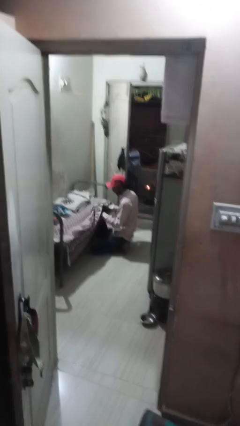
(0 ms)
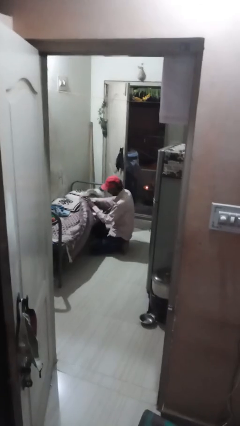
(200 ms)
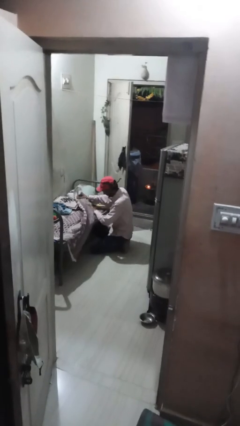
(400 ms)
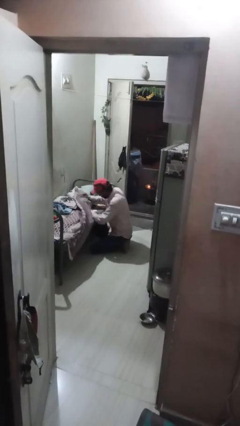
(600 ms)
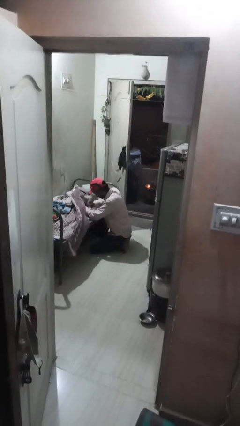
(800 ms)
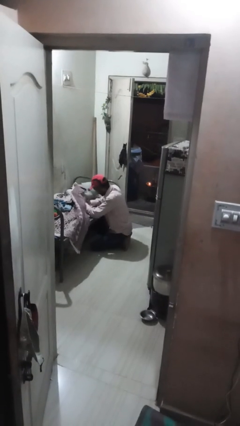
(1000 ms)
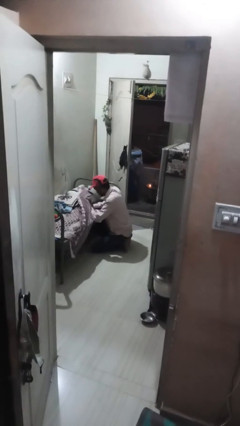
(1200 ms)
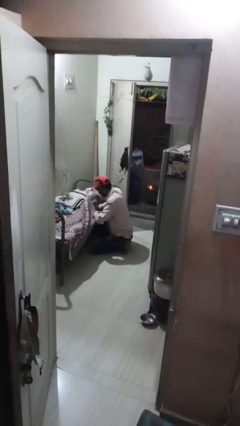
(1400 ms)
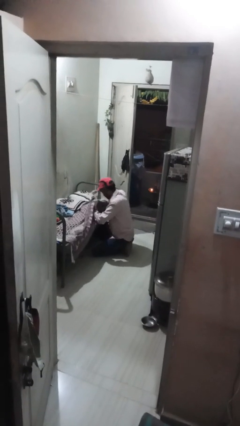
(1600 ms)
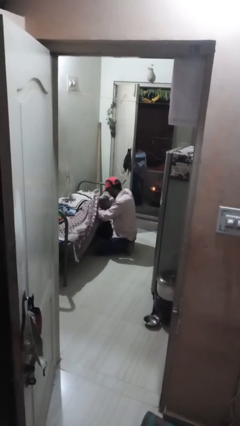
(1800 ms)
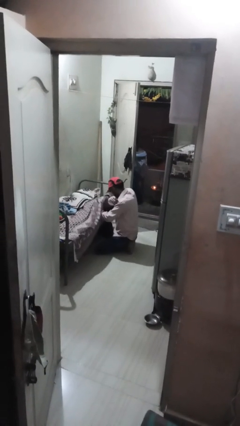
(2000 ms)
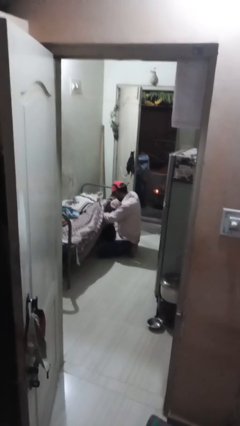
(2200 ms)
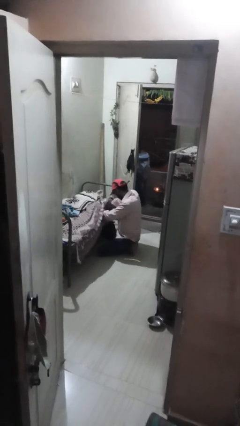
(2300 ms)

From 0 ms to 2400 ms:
person searches under couch

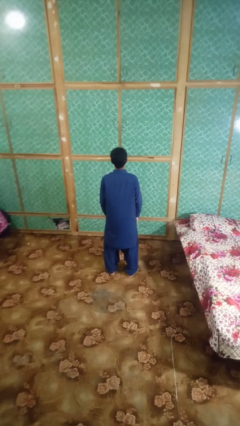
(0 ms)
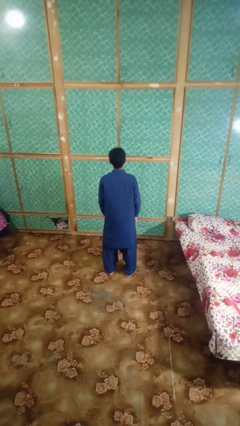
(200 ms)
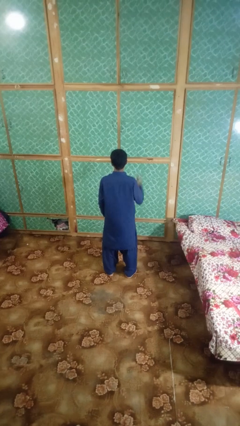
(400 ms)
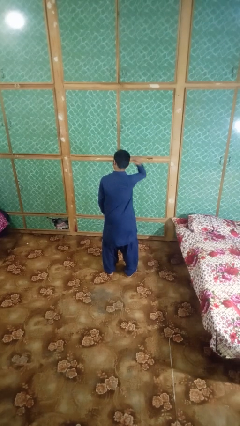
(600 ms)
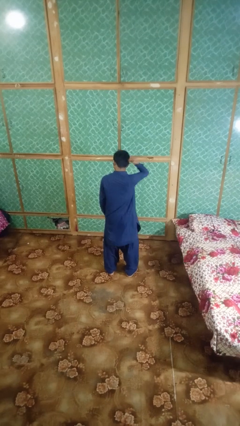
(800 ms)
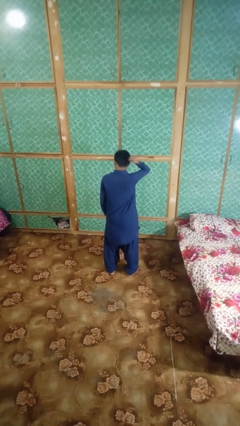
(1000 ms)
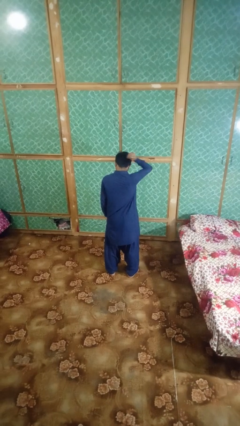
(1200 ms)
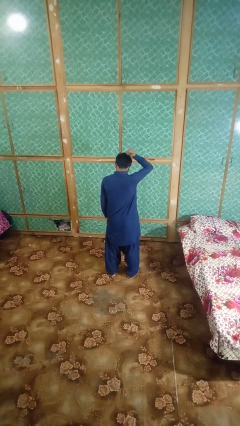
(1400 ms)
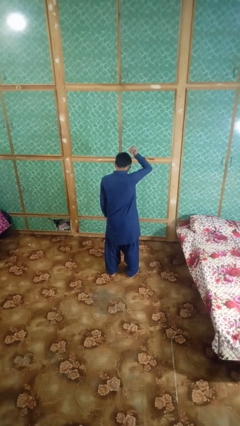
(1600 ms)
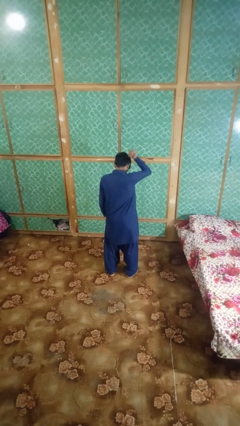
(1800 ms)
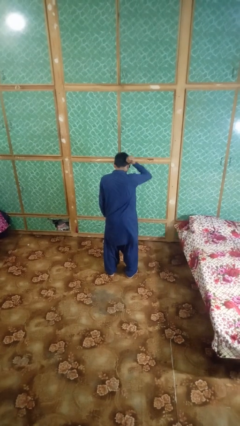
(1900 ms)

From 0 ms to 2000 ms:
person pats head

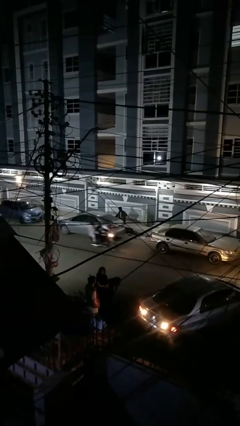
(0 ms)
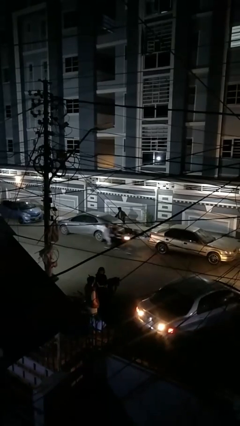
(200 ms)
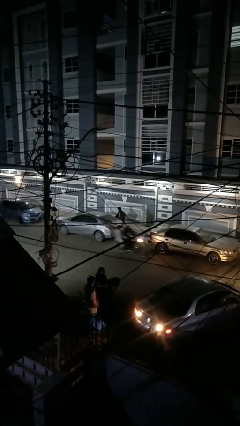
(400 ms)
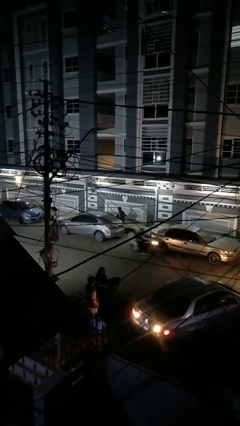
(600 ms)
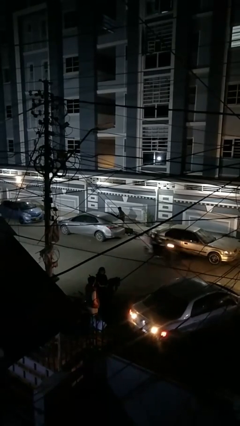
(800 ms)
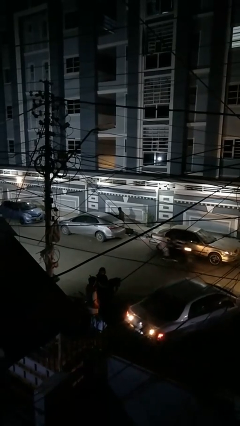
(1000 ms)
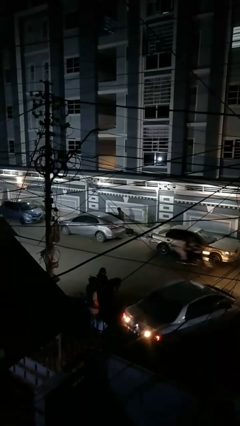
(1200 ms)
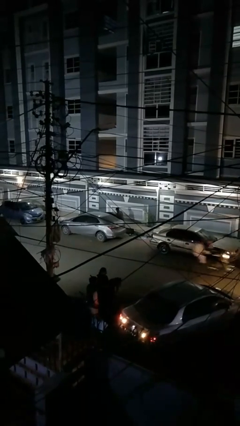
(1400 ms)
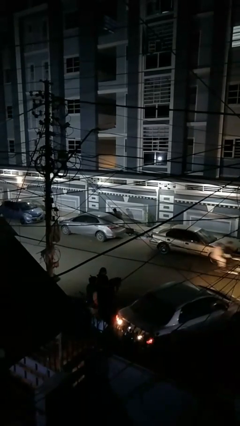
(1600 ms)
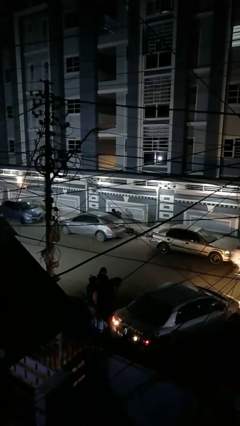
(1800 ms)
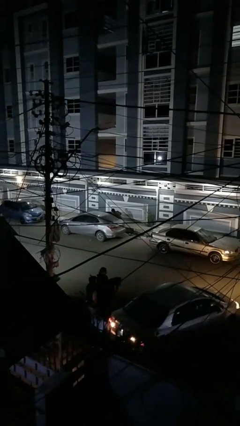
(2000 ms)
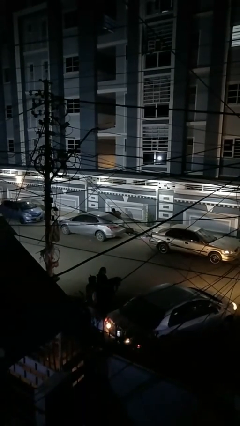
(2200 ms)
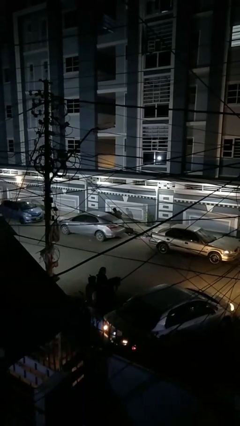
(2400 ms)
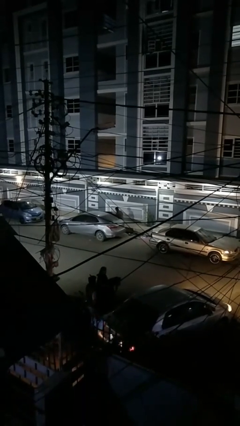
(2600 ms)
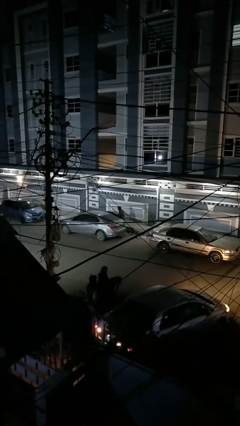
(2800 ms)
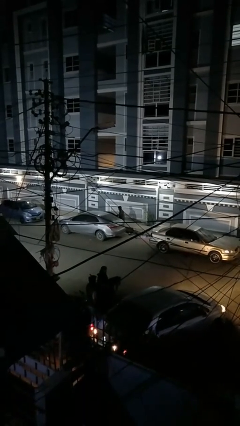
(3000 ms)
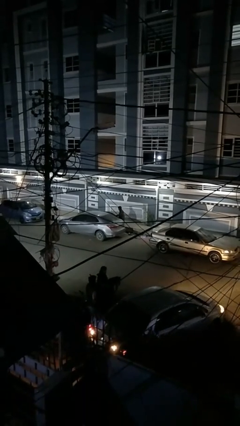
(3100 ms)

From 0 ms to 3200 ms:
person unloads car

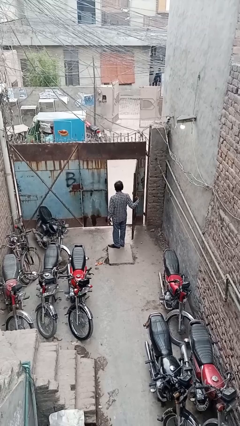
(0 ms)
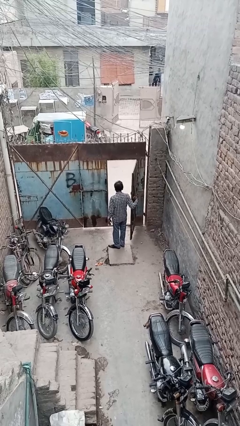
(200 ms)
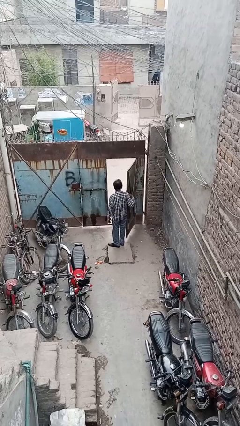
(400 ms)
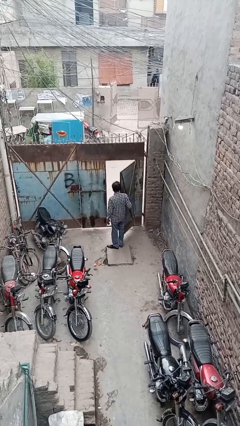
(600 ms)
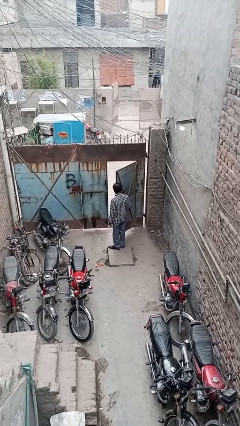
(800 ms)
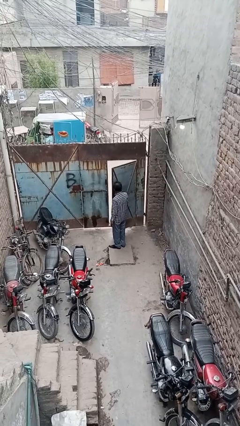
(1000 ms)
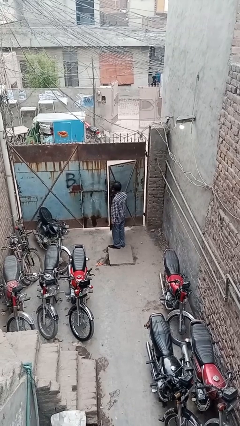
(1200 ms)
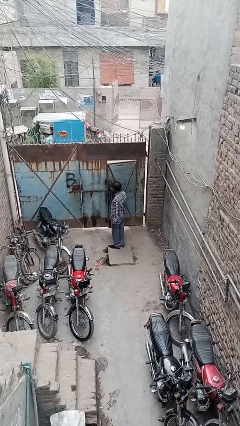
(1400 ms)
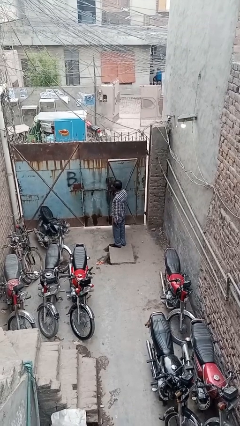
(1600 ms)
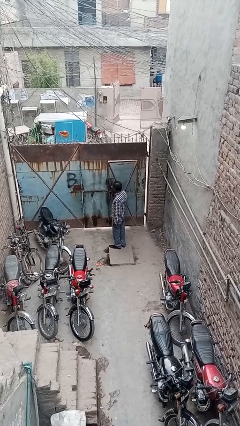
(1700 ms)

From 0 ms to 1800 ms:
person closes facility door

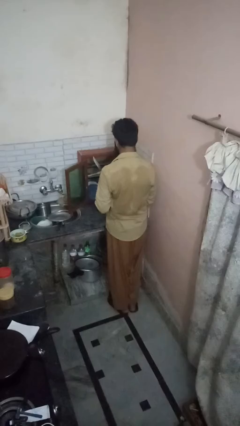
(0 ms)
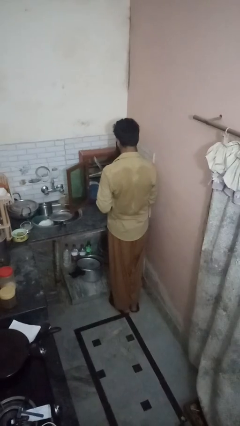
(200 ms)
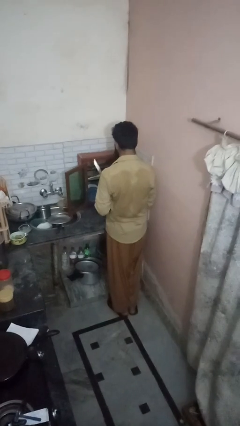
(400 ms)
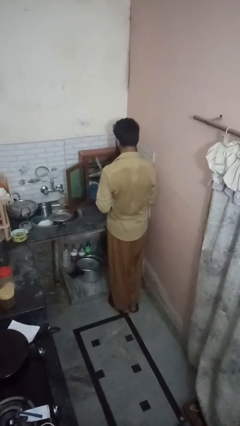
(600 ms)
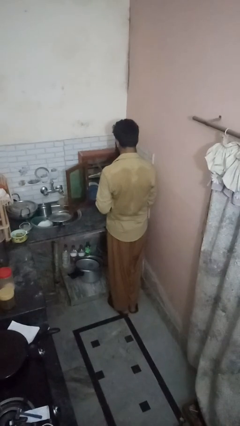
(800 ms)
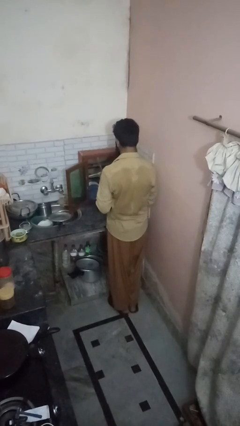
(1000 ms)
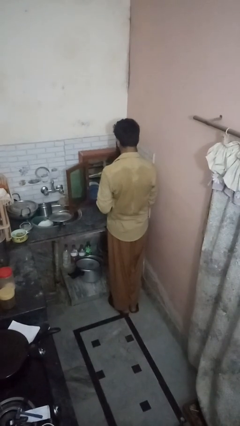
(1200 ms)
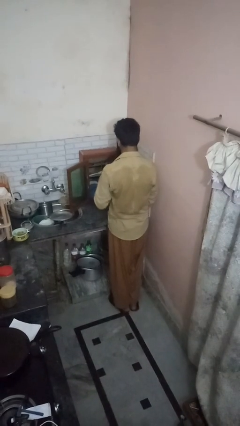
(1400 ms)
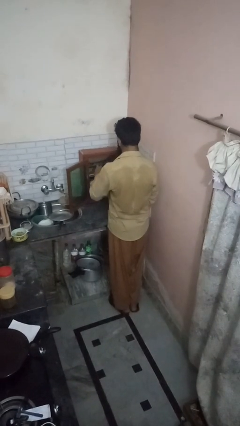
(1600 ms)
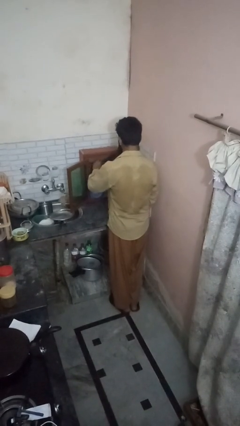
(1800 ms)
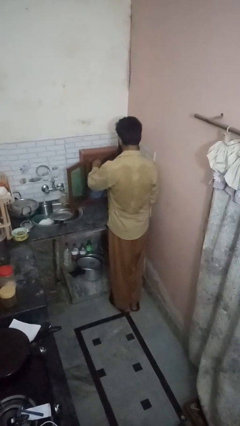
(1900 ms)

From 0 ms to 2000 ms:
person takes object from cabinet

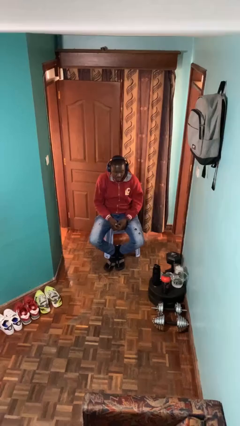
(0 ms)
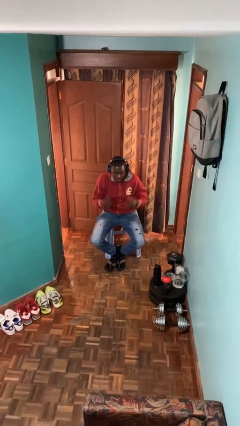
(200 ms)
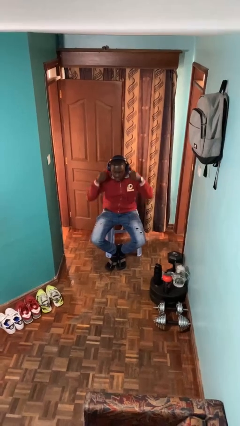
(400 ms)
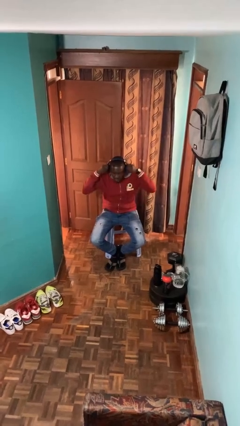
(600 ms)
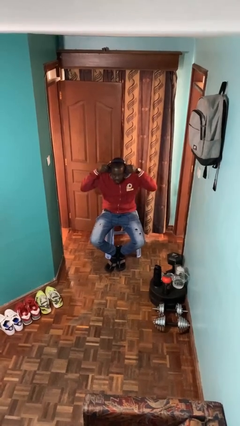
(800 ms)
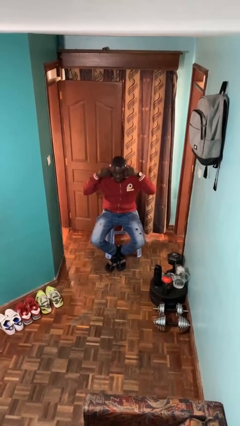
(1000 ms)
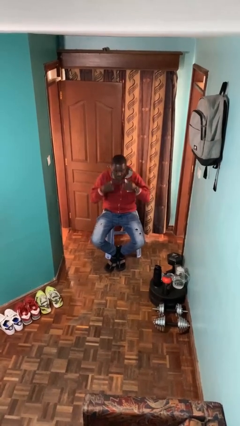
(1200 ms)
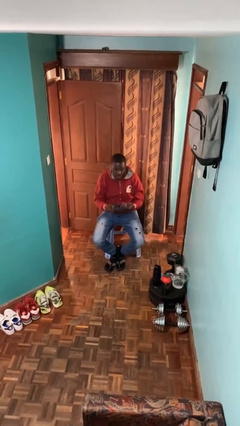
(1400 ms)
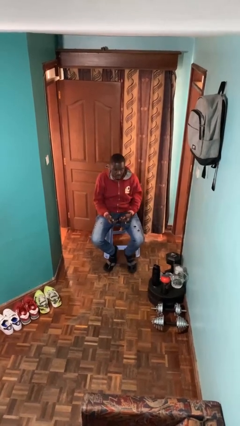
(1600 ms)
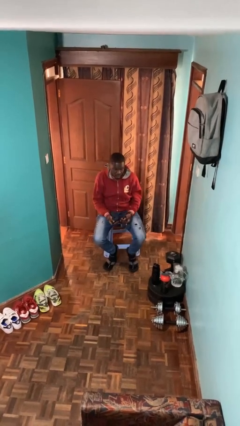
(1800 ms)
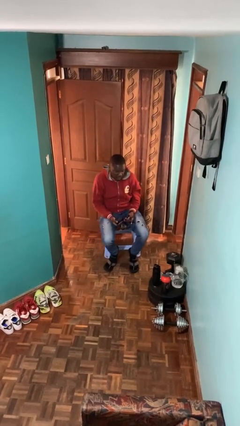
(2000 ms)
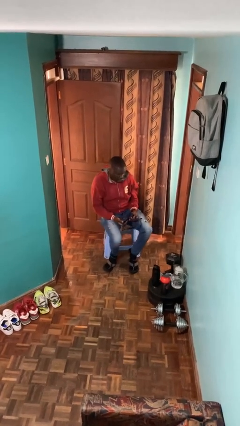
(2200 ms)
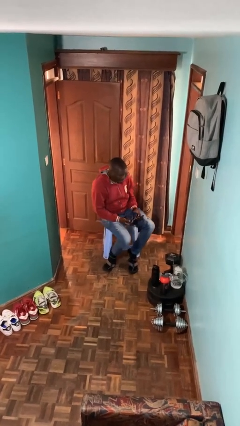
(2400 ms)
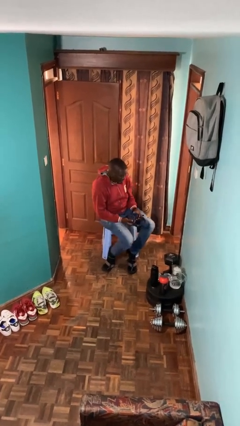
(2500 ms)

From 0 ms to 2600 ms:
person takes off headphones

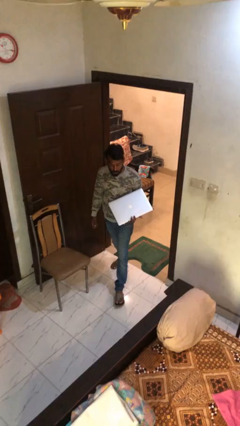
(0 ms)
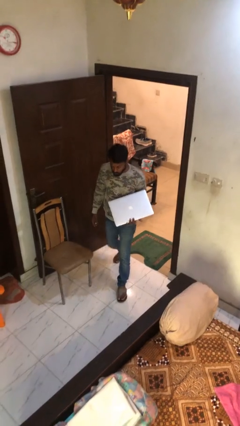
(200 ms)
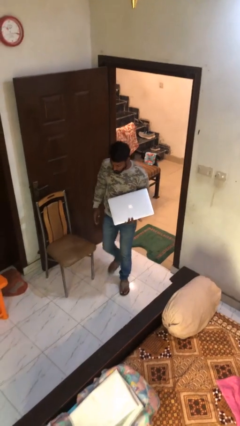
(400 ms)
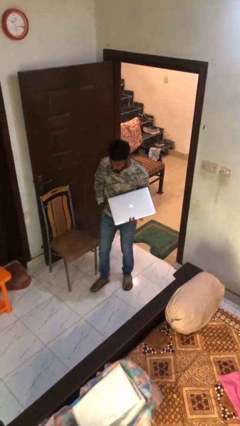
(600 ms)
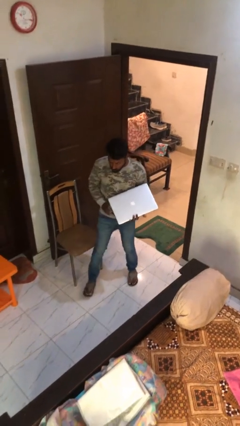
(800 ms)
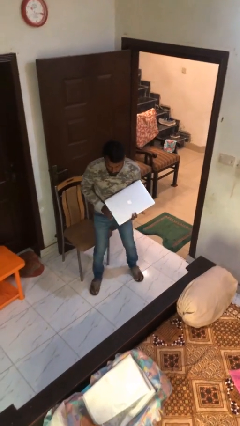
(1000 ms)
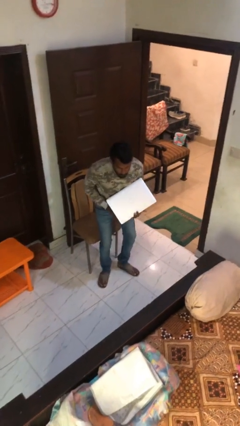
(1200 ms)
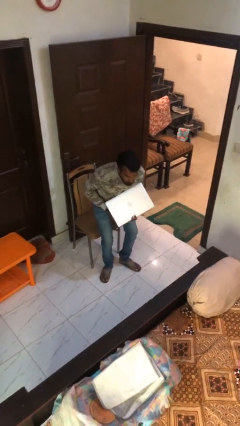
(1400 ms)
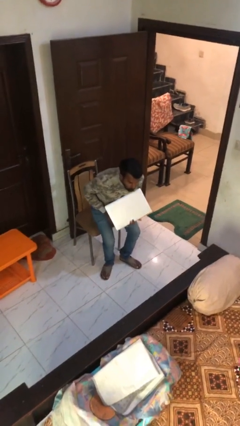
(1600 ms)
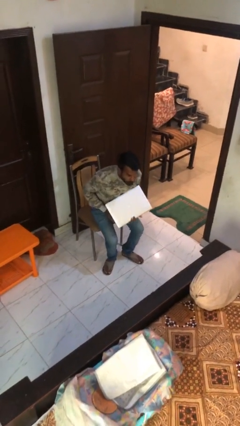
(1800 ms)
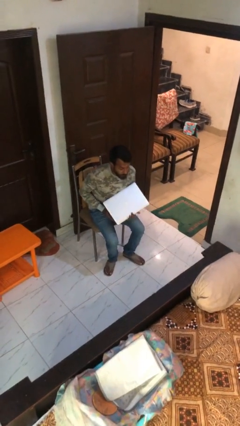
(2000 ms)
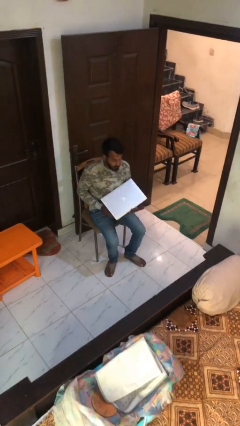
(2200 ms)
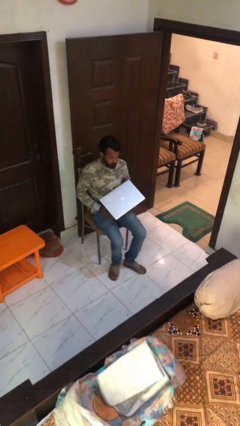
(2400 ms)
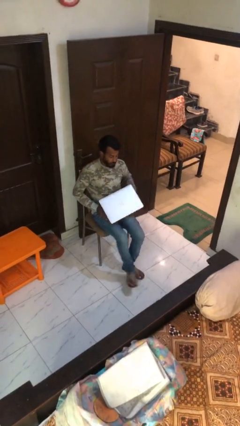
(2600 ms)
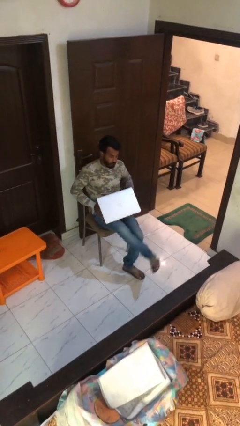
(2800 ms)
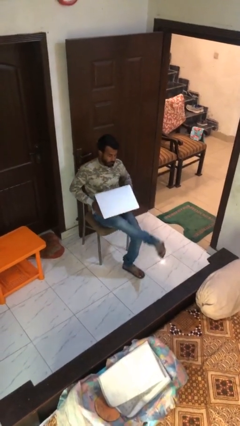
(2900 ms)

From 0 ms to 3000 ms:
person sits down

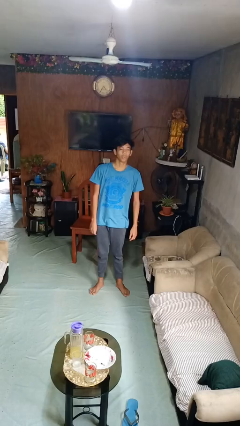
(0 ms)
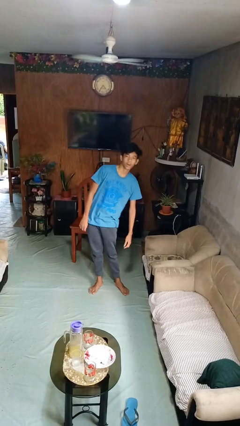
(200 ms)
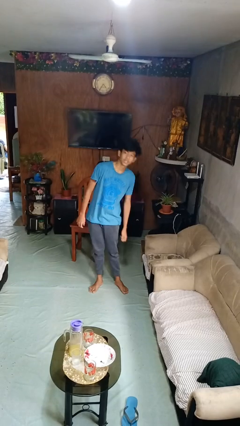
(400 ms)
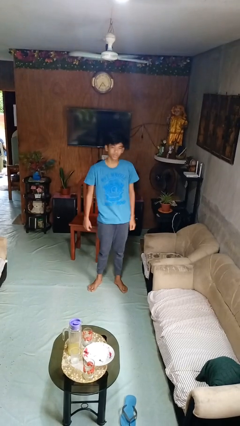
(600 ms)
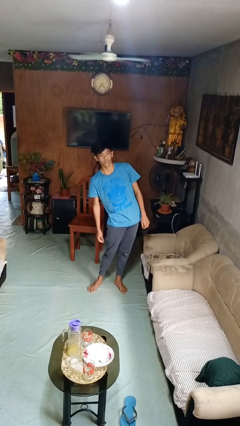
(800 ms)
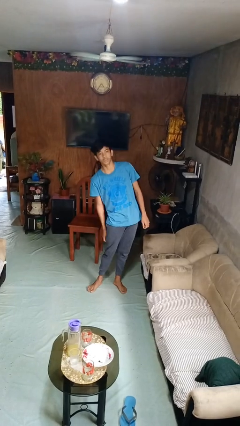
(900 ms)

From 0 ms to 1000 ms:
person dances in place
